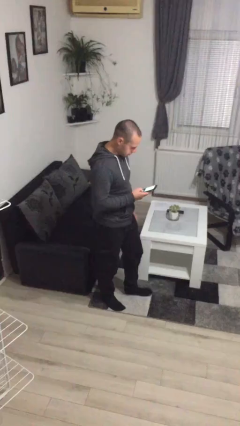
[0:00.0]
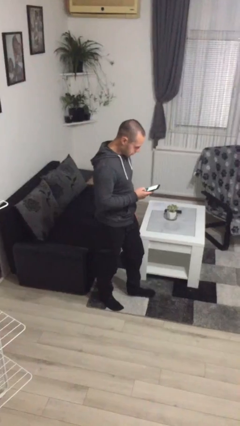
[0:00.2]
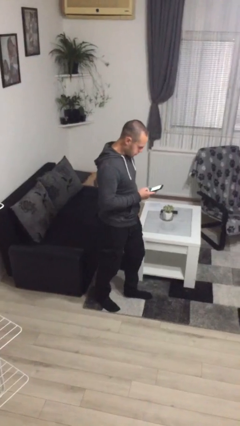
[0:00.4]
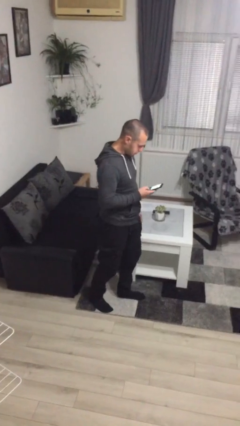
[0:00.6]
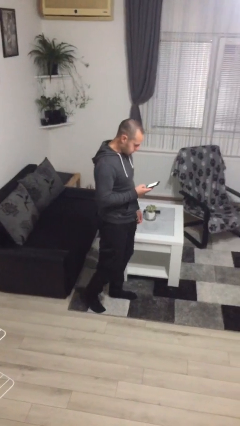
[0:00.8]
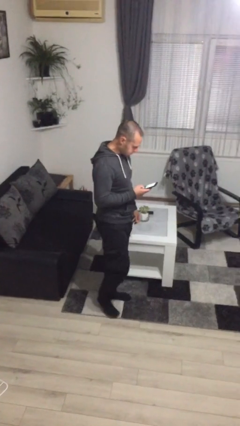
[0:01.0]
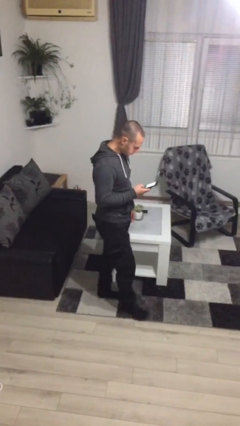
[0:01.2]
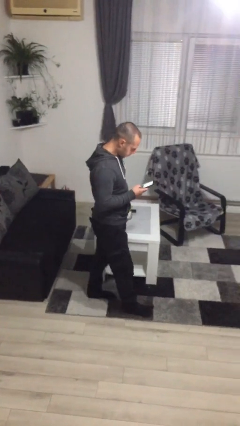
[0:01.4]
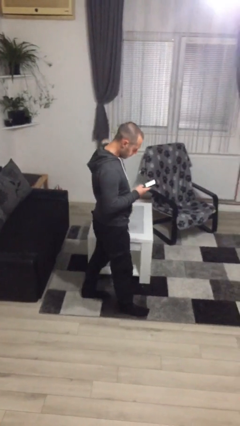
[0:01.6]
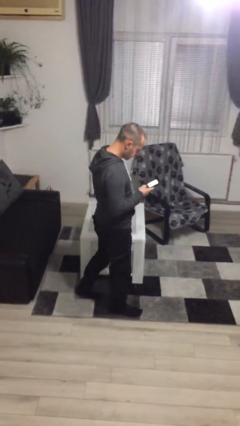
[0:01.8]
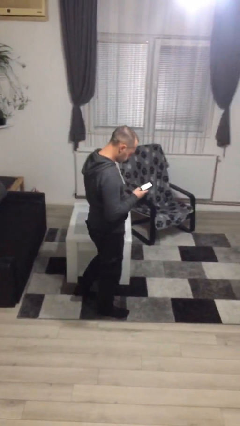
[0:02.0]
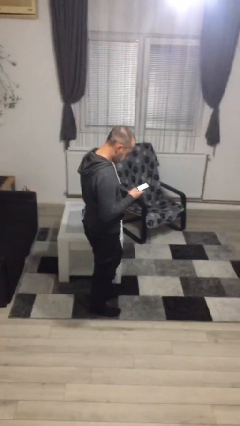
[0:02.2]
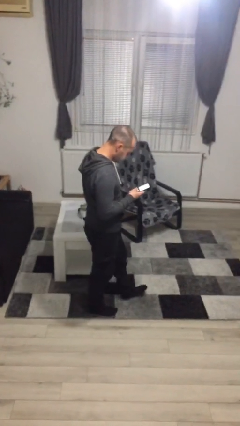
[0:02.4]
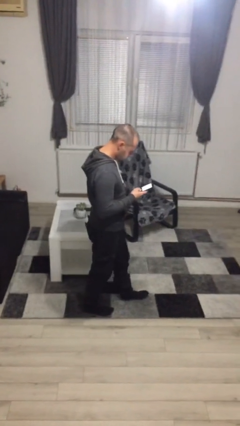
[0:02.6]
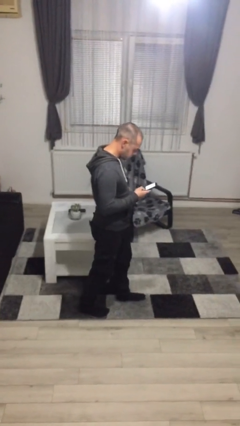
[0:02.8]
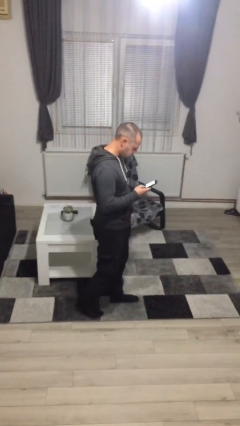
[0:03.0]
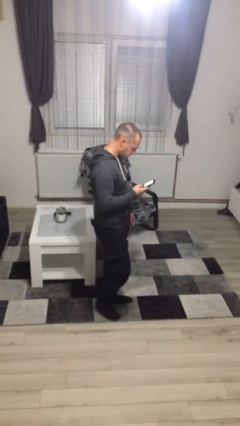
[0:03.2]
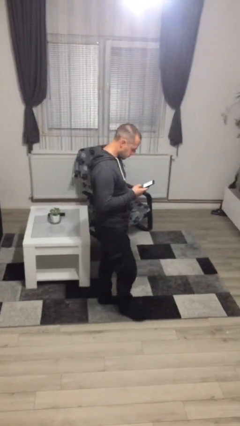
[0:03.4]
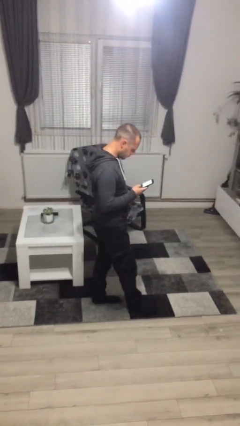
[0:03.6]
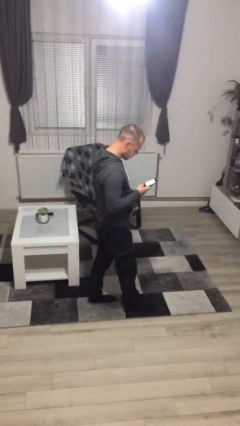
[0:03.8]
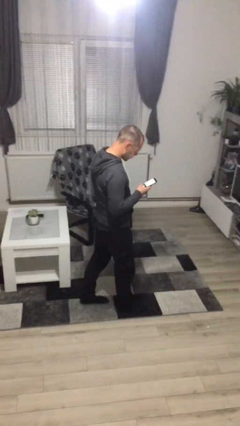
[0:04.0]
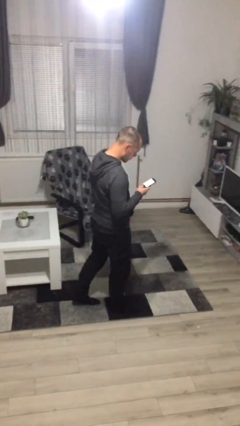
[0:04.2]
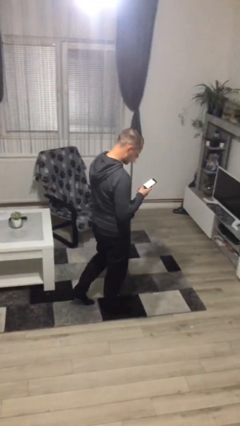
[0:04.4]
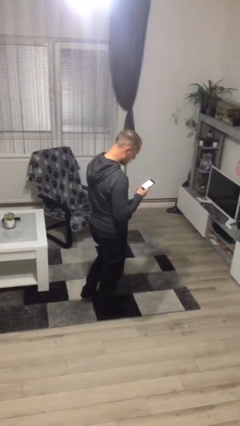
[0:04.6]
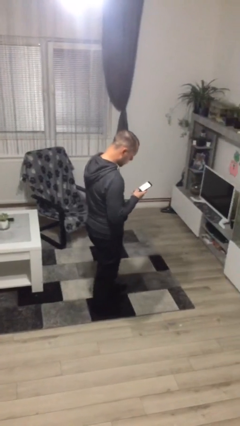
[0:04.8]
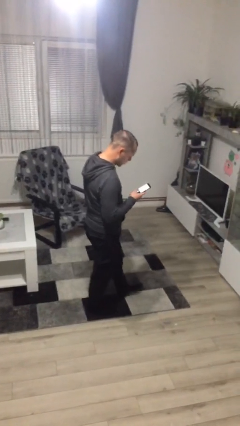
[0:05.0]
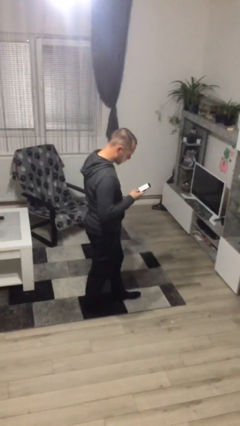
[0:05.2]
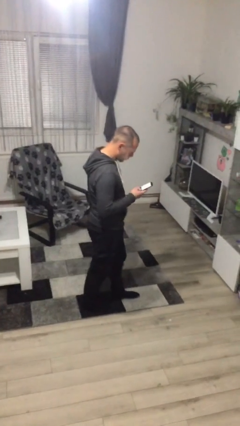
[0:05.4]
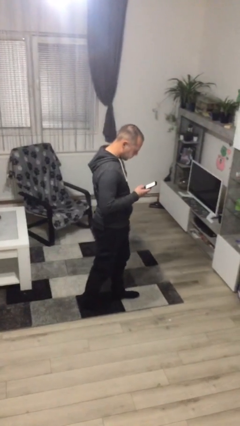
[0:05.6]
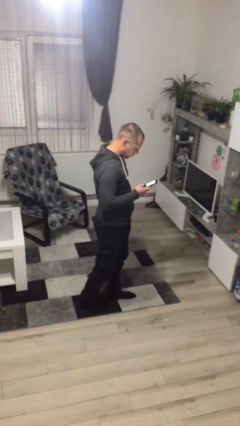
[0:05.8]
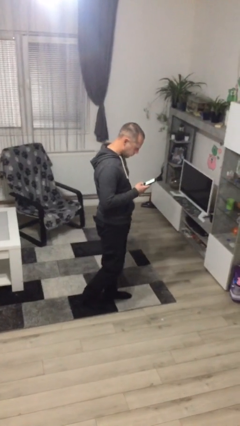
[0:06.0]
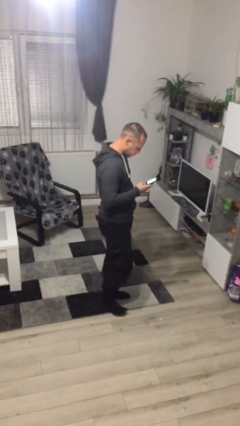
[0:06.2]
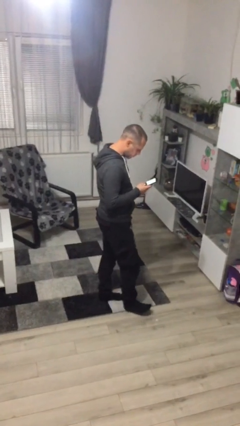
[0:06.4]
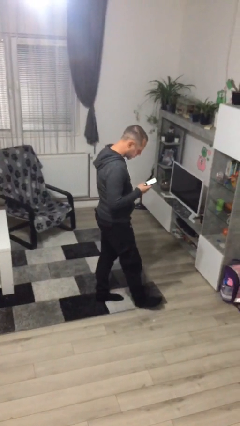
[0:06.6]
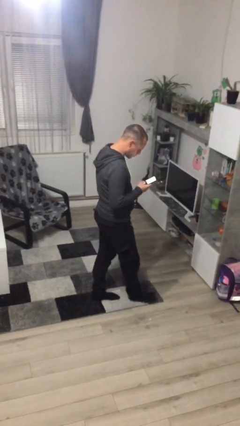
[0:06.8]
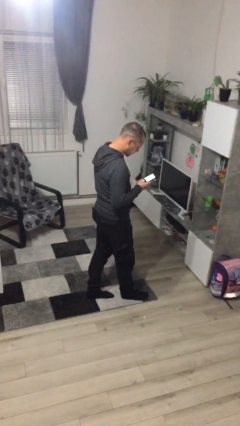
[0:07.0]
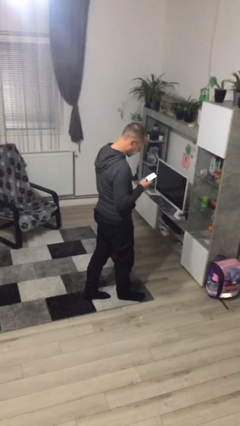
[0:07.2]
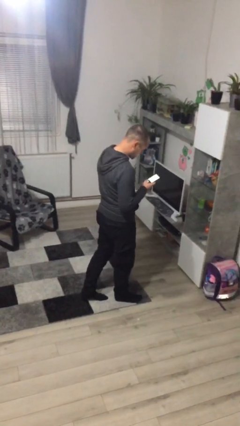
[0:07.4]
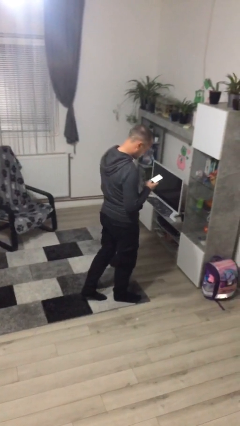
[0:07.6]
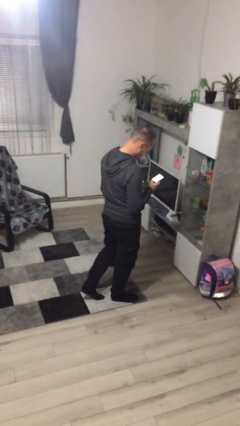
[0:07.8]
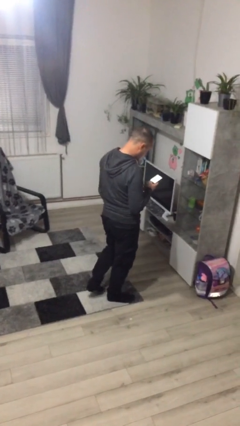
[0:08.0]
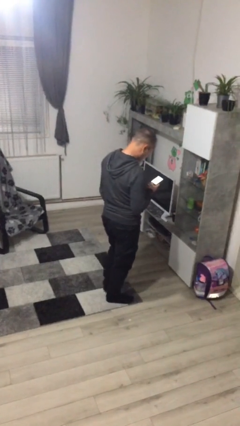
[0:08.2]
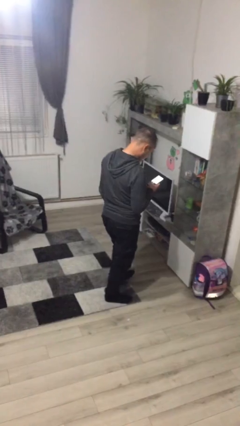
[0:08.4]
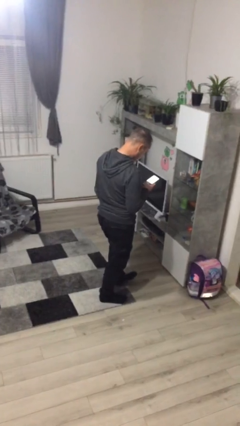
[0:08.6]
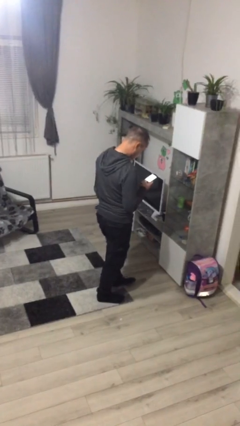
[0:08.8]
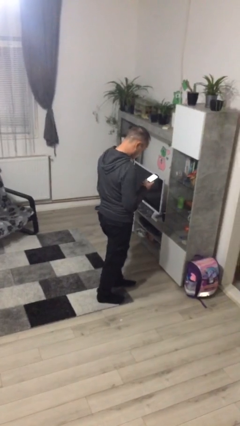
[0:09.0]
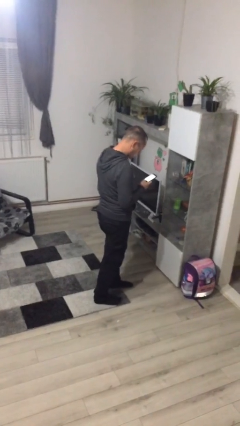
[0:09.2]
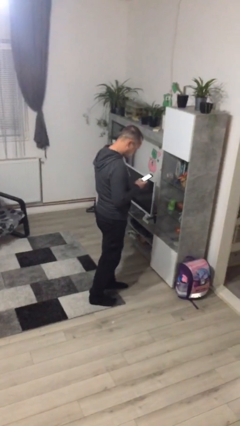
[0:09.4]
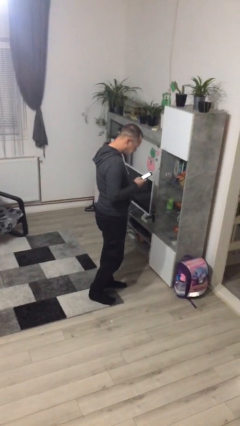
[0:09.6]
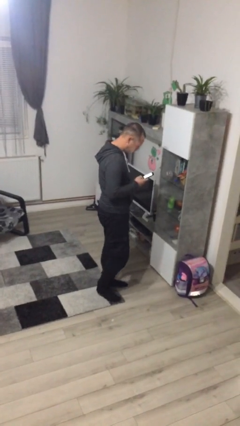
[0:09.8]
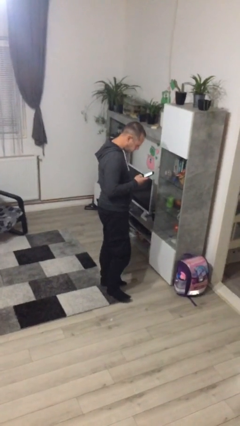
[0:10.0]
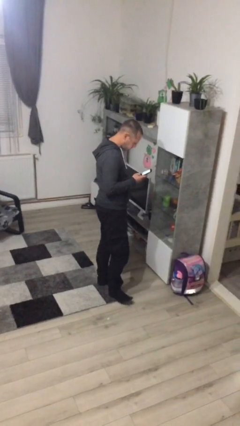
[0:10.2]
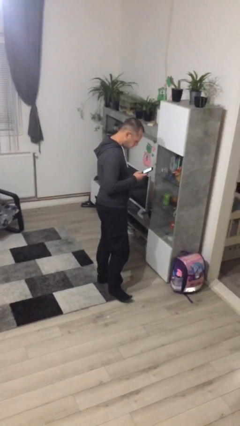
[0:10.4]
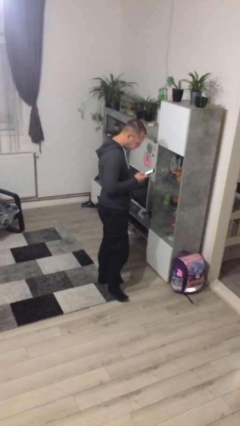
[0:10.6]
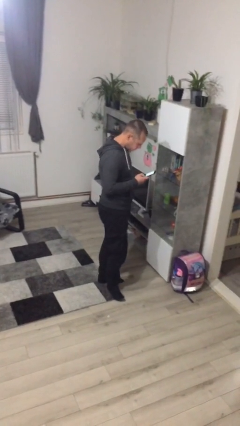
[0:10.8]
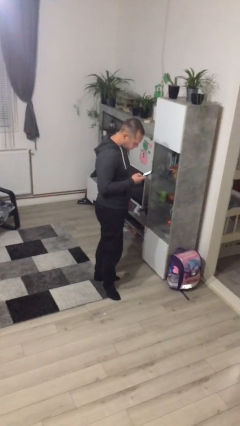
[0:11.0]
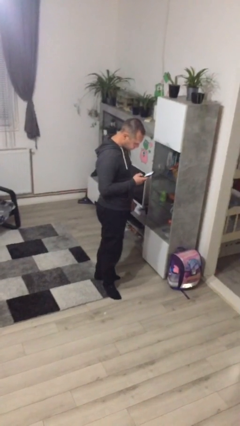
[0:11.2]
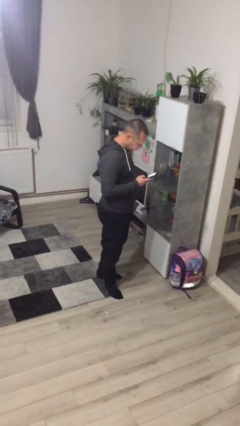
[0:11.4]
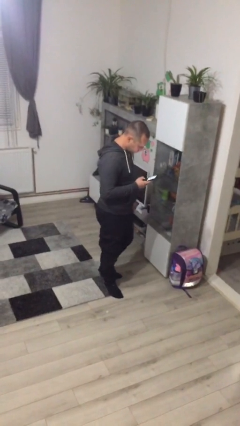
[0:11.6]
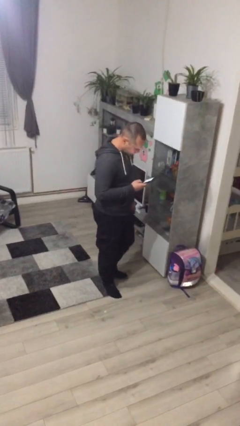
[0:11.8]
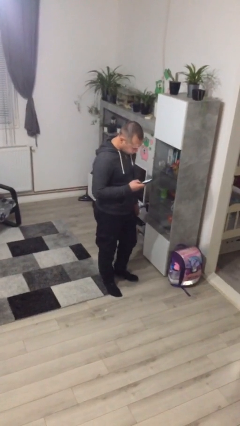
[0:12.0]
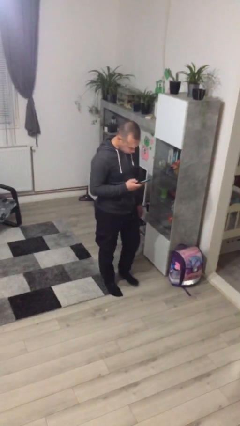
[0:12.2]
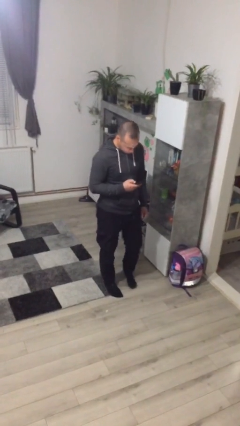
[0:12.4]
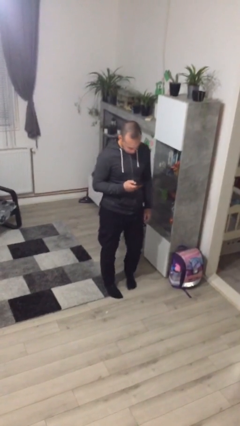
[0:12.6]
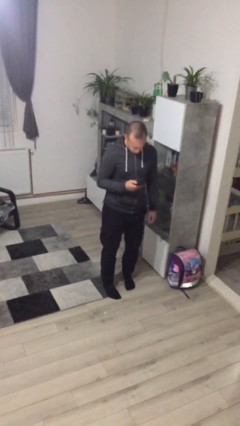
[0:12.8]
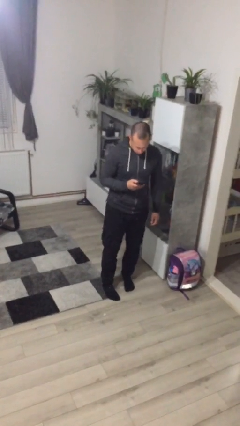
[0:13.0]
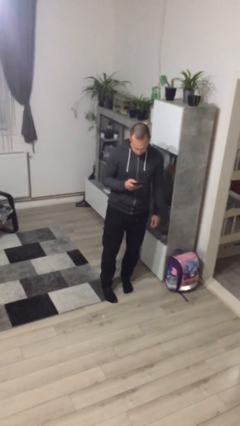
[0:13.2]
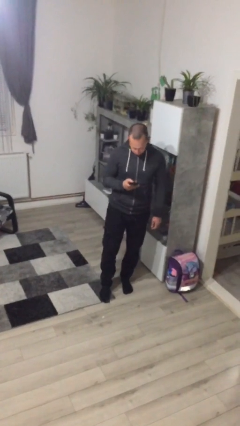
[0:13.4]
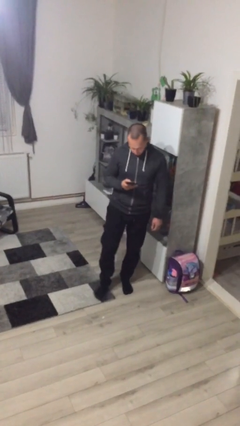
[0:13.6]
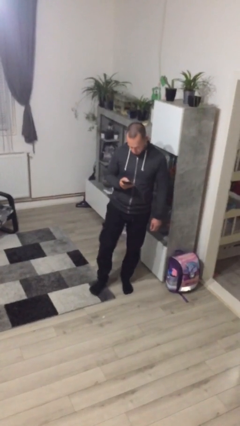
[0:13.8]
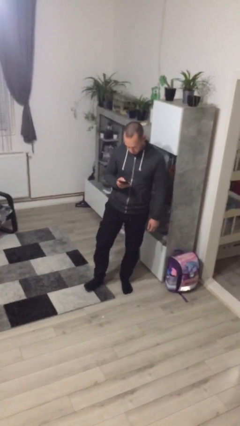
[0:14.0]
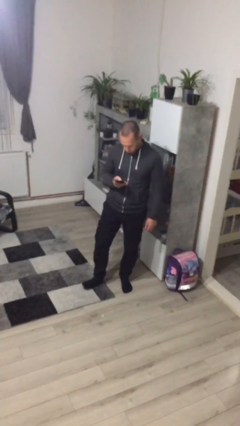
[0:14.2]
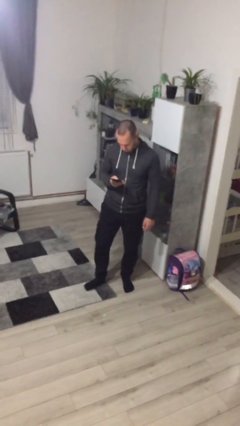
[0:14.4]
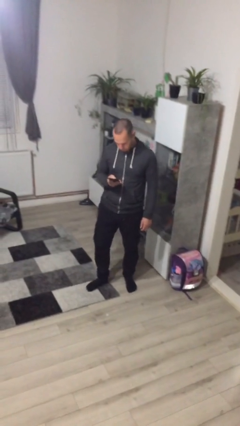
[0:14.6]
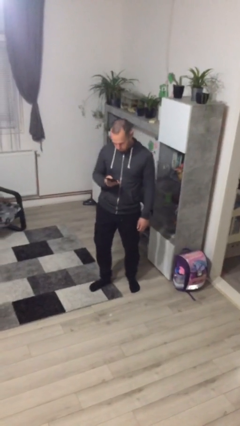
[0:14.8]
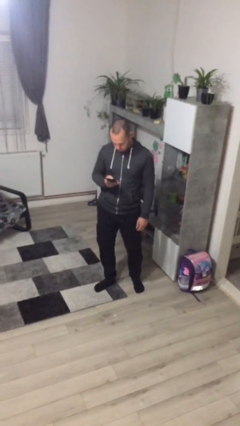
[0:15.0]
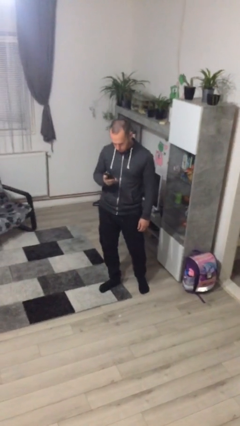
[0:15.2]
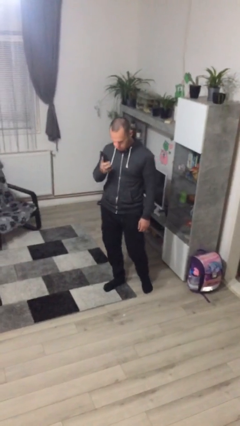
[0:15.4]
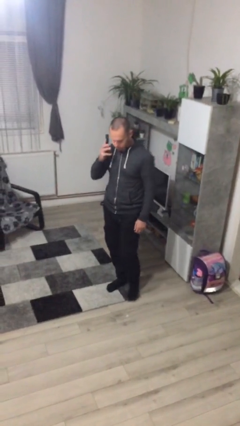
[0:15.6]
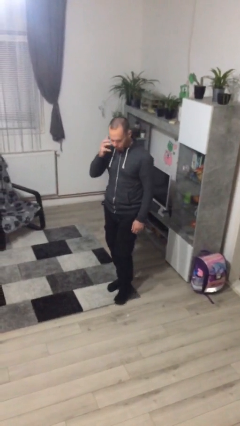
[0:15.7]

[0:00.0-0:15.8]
person texts on phone

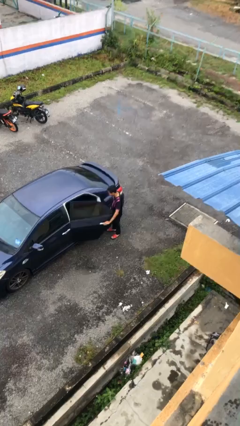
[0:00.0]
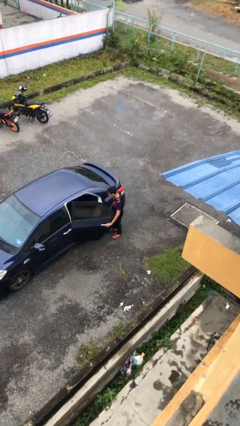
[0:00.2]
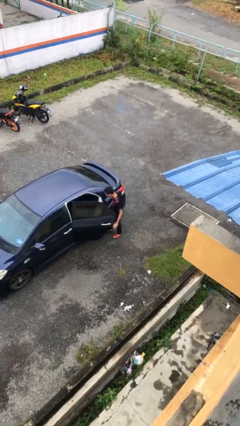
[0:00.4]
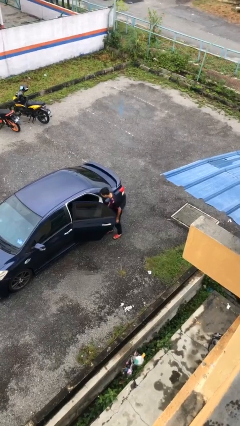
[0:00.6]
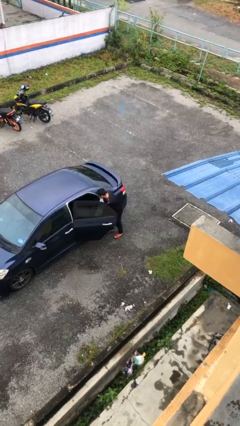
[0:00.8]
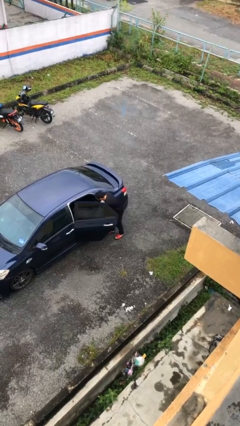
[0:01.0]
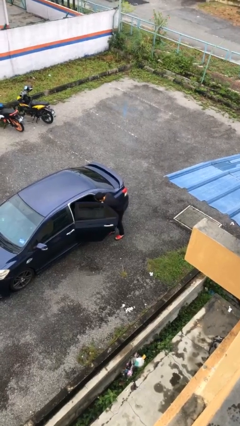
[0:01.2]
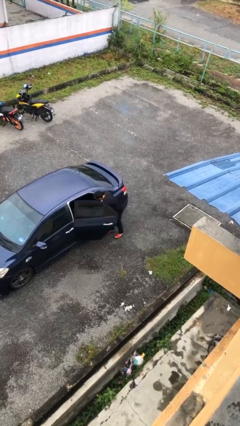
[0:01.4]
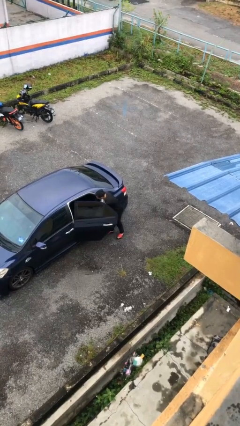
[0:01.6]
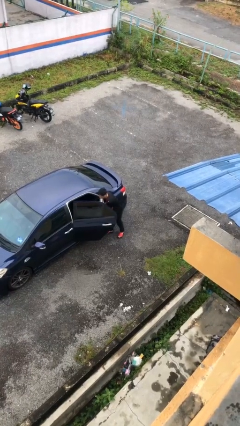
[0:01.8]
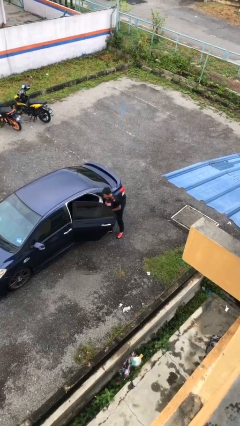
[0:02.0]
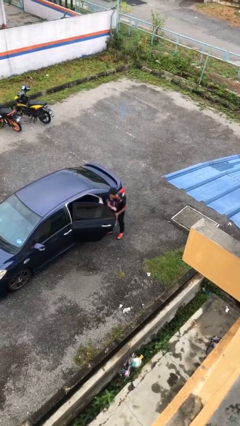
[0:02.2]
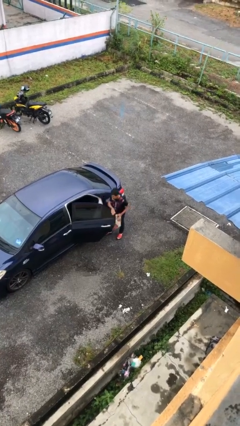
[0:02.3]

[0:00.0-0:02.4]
person unloads car

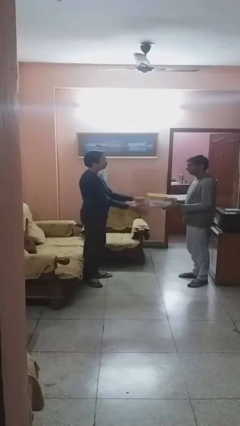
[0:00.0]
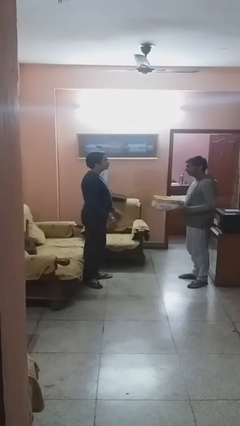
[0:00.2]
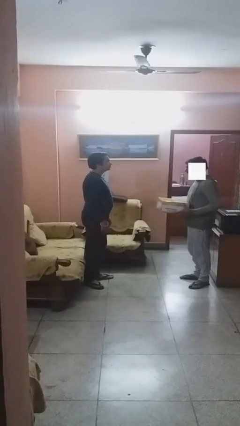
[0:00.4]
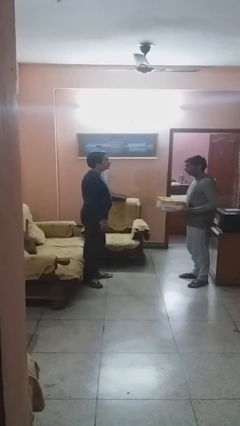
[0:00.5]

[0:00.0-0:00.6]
person transfers object to person
